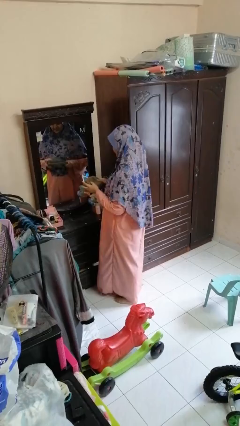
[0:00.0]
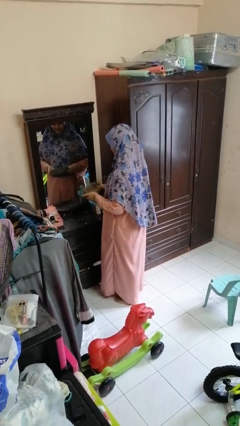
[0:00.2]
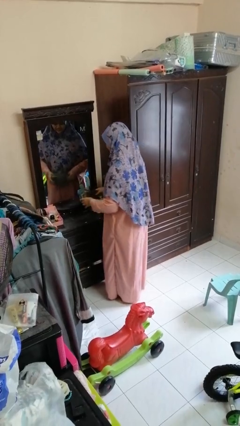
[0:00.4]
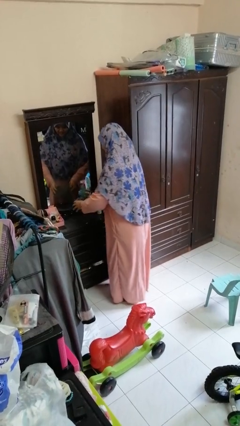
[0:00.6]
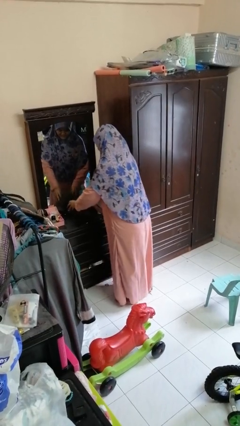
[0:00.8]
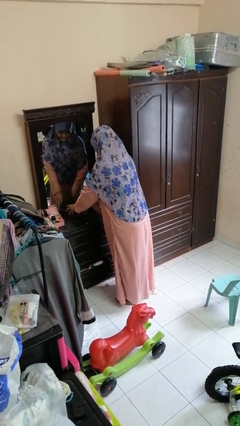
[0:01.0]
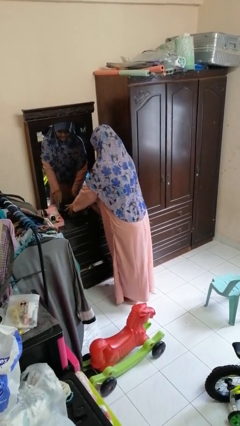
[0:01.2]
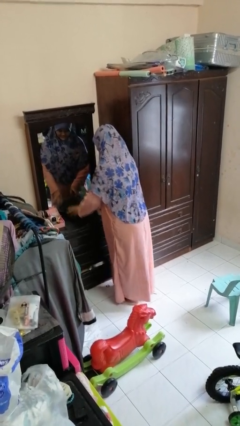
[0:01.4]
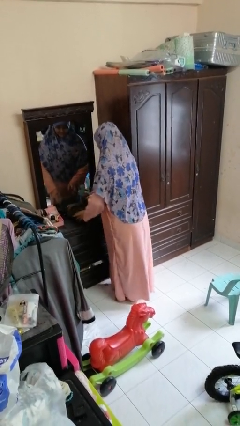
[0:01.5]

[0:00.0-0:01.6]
person puts down object on countertop

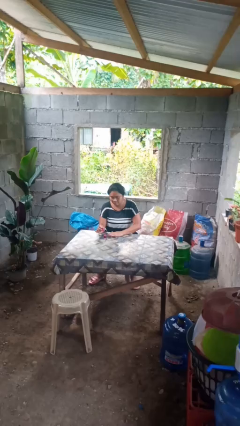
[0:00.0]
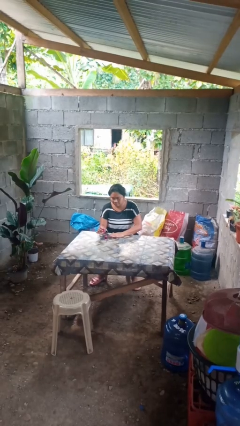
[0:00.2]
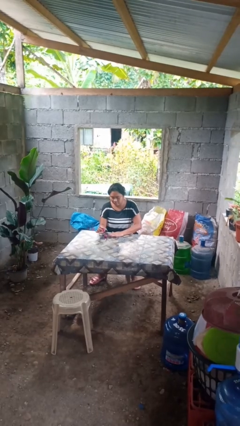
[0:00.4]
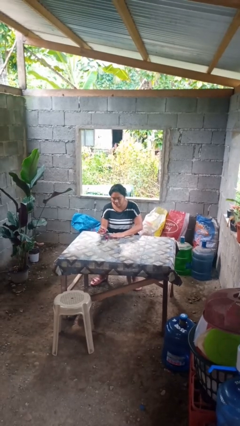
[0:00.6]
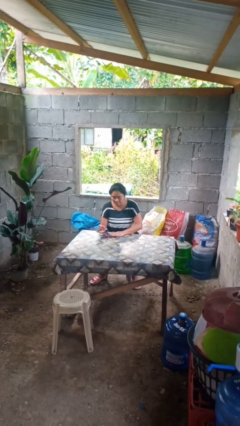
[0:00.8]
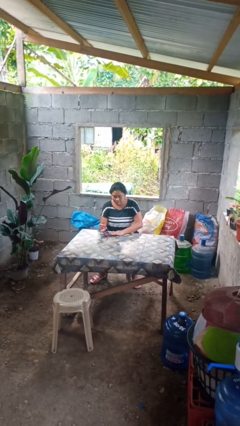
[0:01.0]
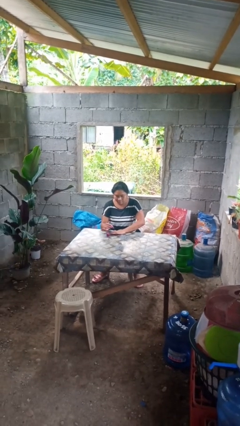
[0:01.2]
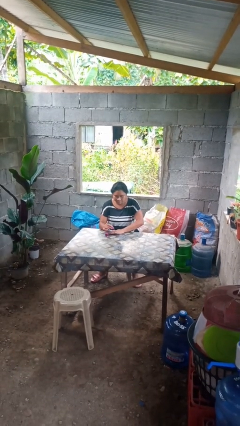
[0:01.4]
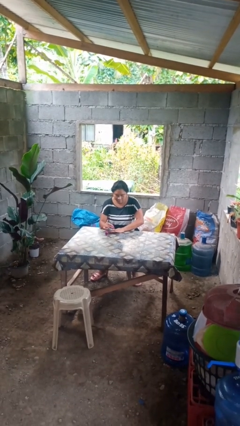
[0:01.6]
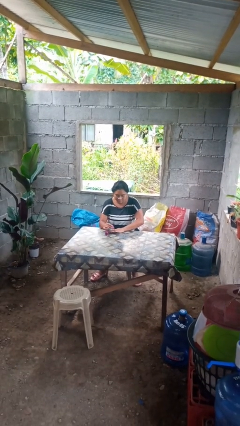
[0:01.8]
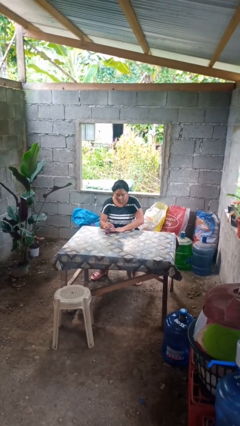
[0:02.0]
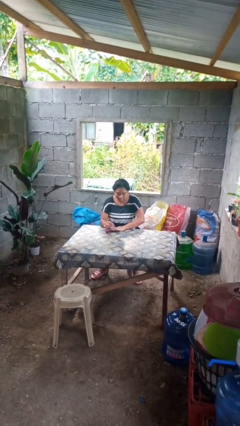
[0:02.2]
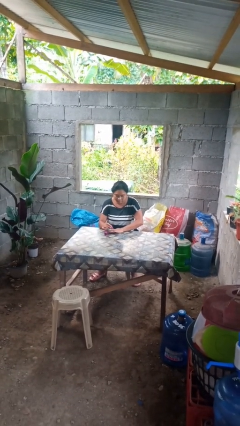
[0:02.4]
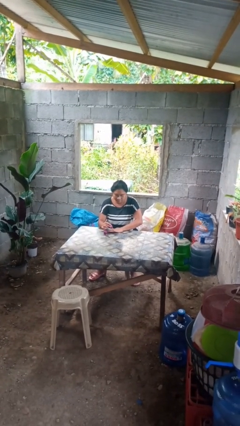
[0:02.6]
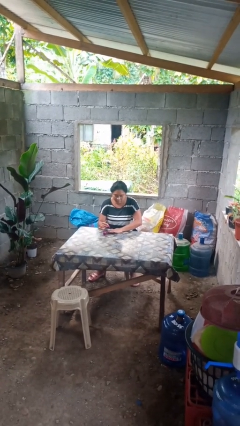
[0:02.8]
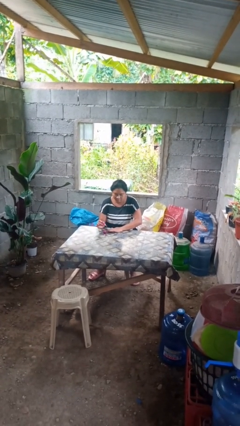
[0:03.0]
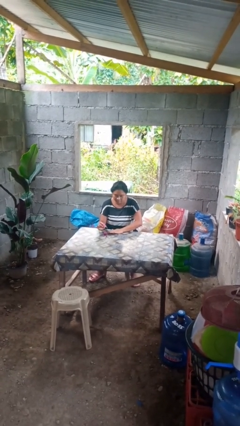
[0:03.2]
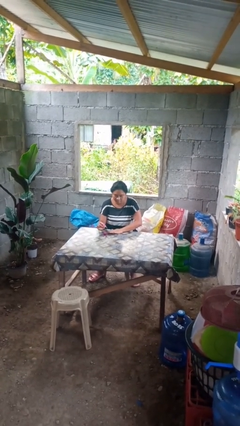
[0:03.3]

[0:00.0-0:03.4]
person paints fingernails

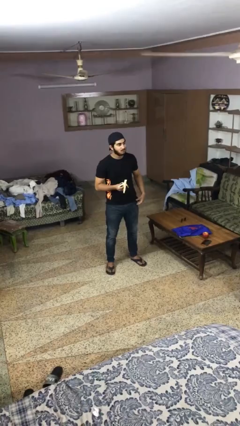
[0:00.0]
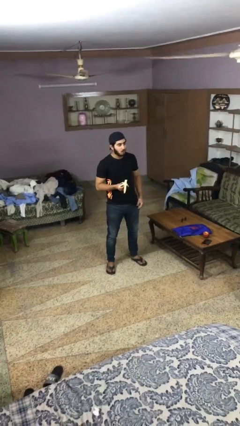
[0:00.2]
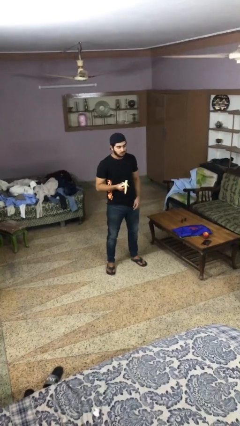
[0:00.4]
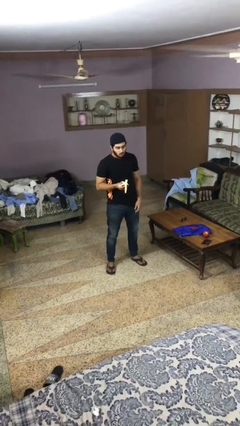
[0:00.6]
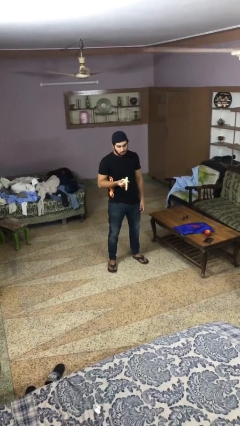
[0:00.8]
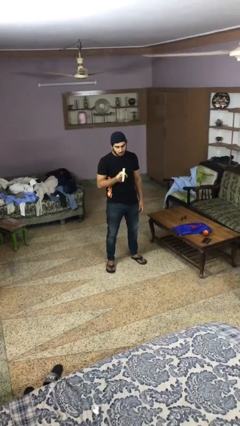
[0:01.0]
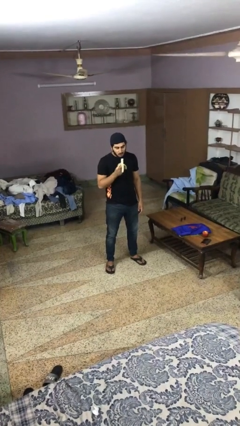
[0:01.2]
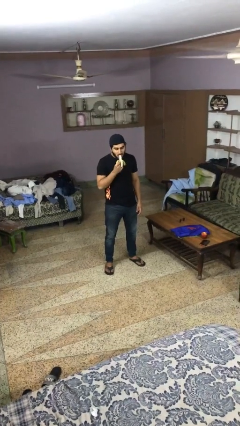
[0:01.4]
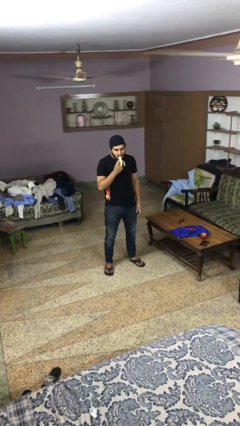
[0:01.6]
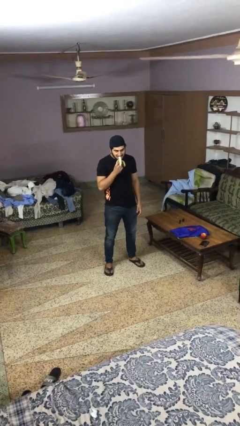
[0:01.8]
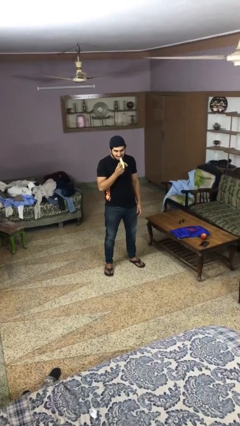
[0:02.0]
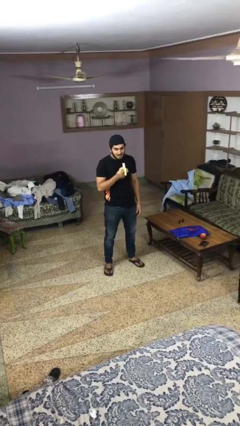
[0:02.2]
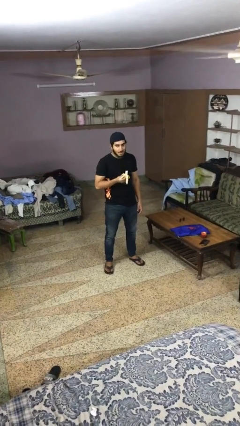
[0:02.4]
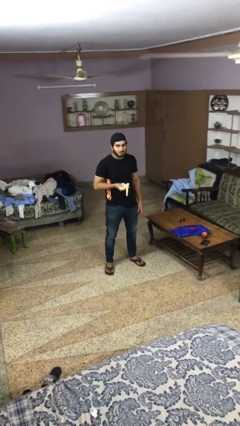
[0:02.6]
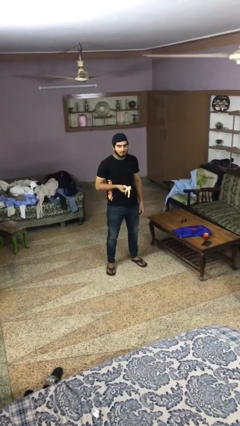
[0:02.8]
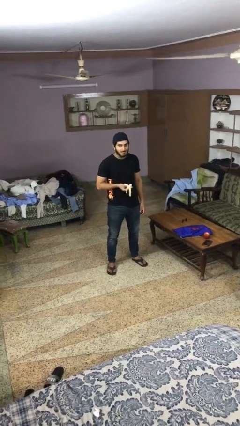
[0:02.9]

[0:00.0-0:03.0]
person eats banana

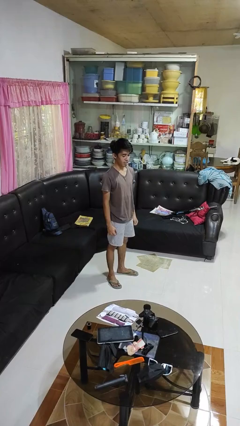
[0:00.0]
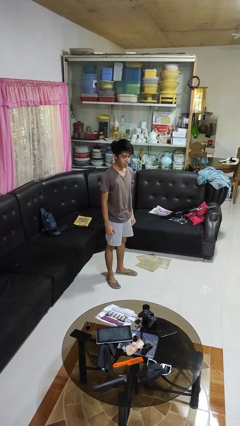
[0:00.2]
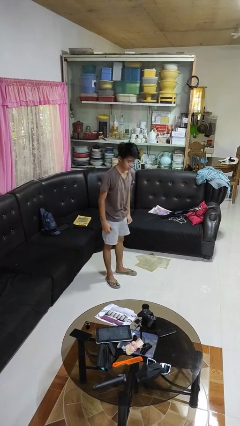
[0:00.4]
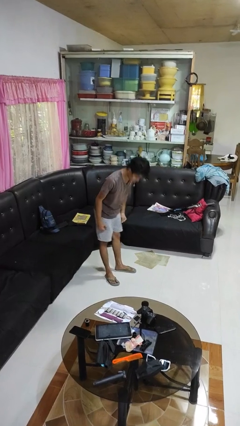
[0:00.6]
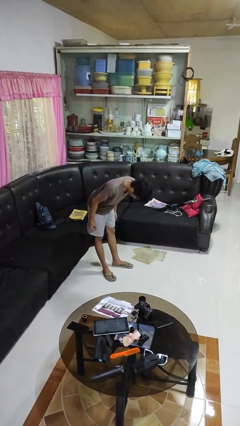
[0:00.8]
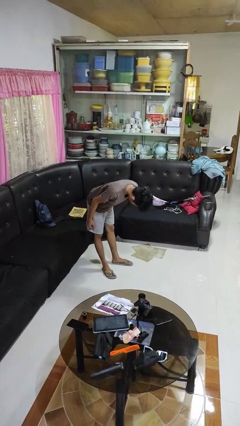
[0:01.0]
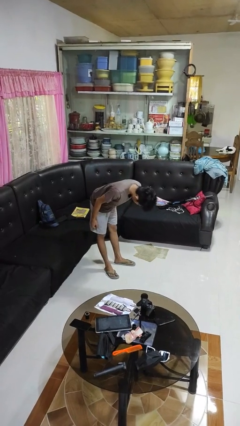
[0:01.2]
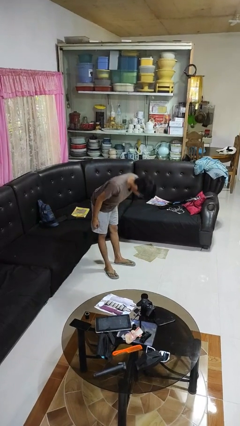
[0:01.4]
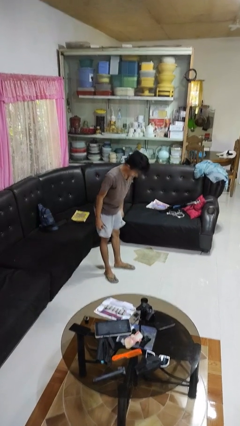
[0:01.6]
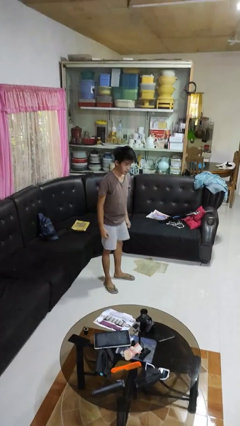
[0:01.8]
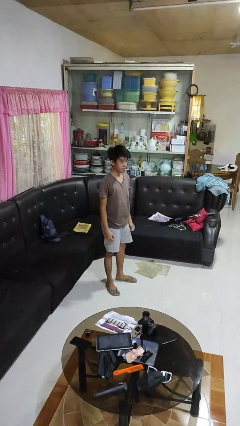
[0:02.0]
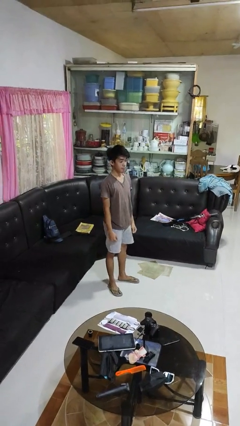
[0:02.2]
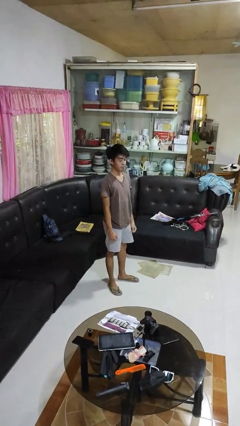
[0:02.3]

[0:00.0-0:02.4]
person bows

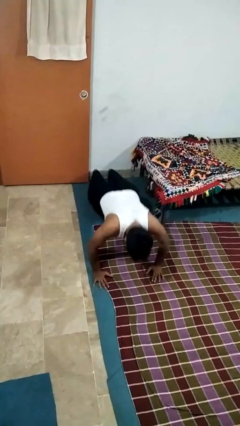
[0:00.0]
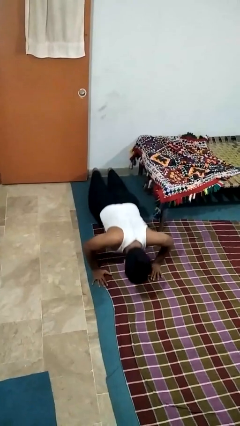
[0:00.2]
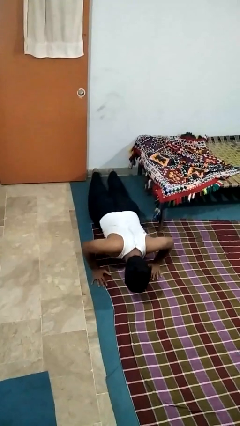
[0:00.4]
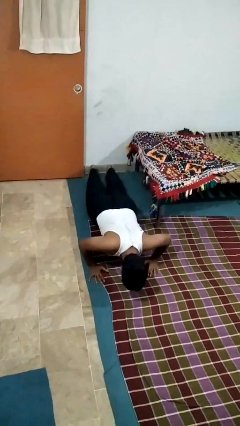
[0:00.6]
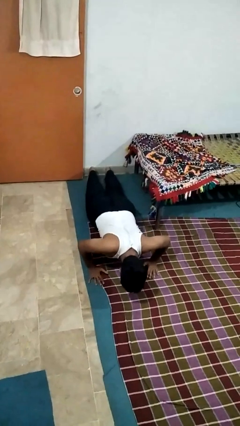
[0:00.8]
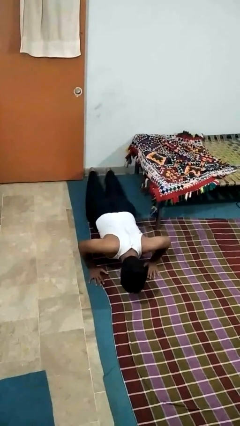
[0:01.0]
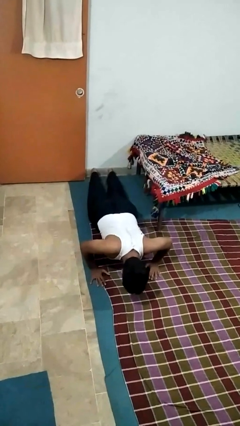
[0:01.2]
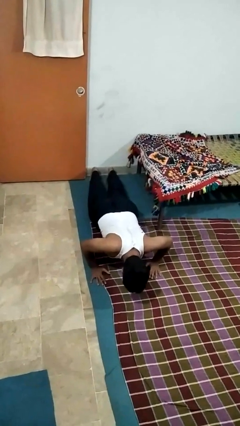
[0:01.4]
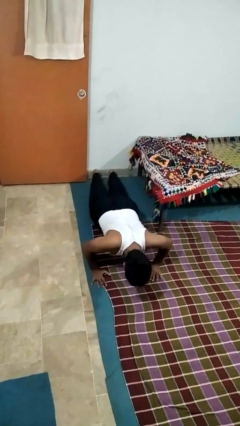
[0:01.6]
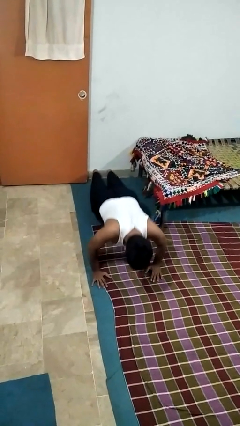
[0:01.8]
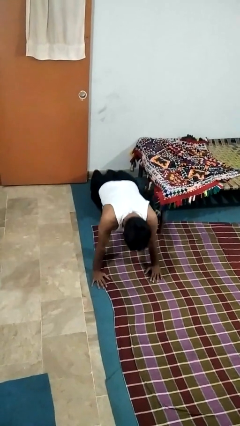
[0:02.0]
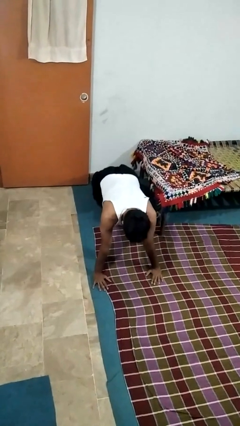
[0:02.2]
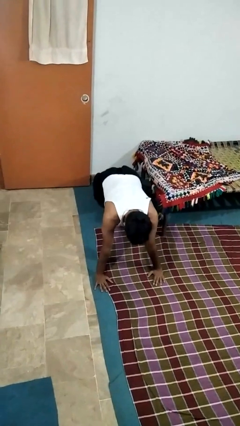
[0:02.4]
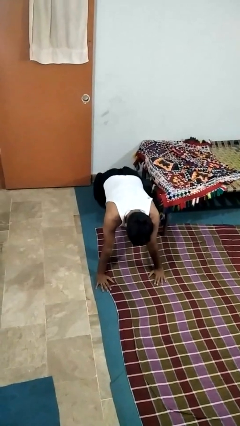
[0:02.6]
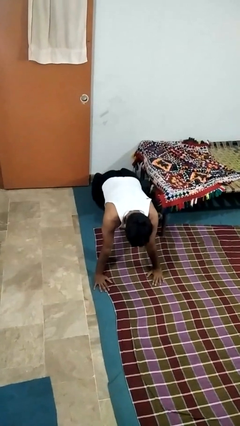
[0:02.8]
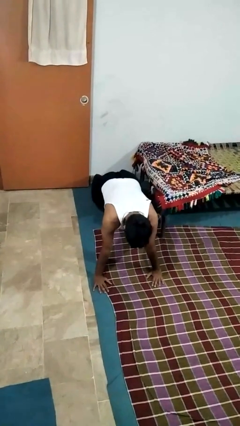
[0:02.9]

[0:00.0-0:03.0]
person exercises with pushup

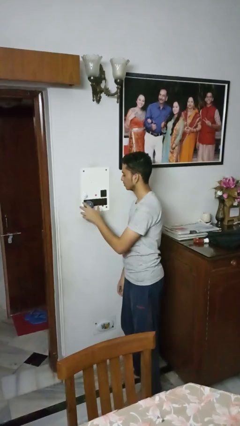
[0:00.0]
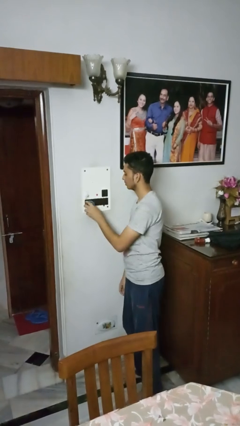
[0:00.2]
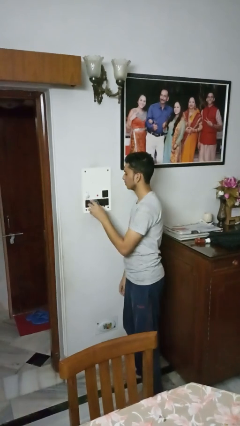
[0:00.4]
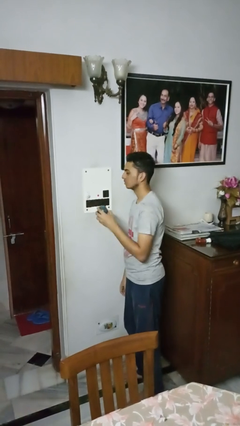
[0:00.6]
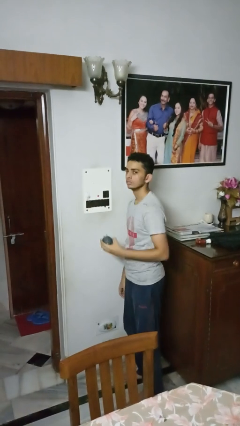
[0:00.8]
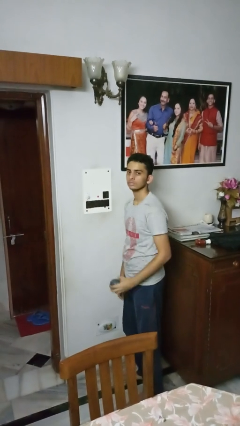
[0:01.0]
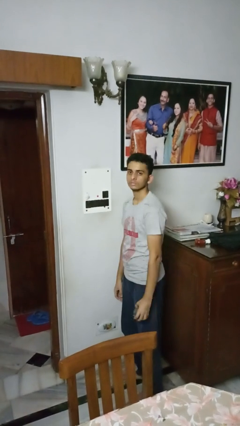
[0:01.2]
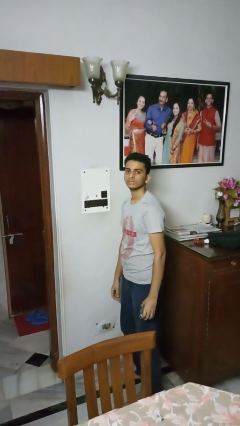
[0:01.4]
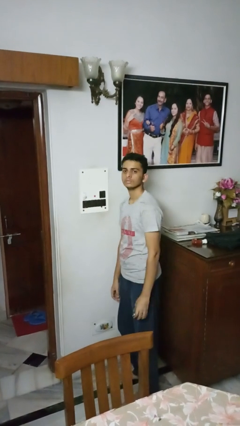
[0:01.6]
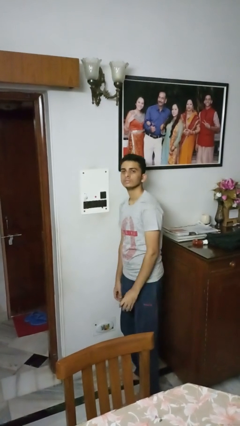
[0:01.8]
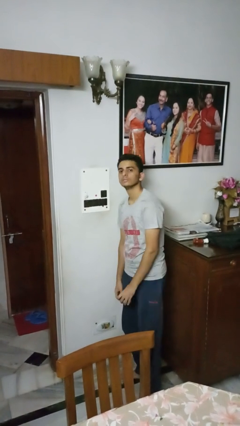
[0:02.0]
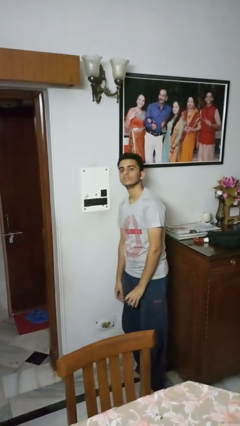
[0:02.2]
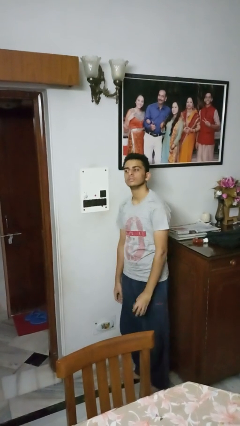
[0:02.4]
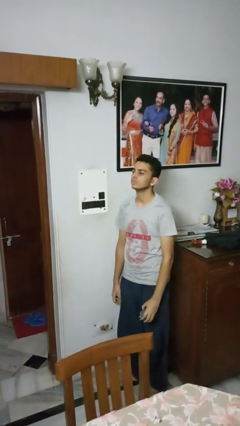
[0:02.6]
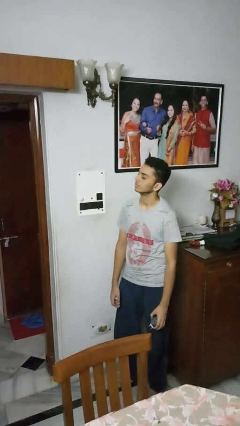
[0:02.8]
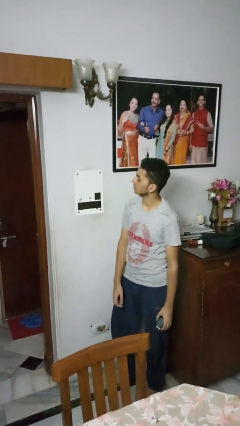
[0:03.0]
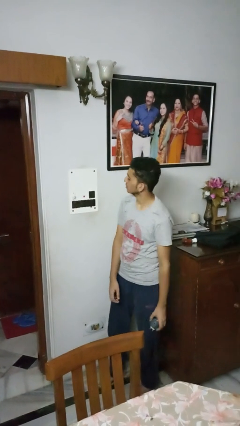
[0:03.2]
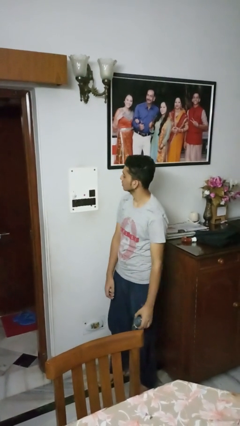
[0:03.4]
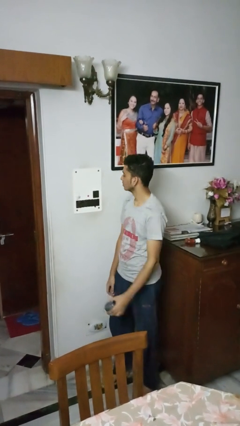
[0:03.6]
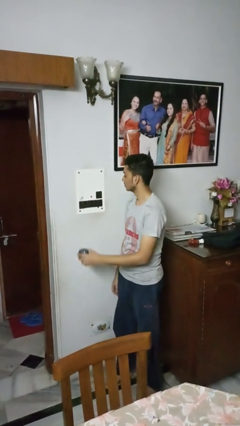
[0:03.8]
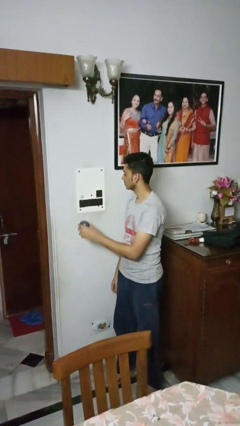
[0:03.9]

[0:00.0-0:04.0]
person unplugs from electrical socket

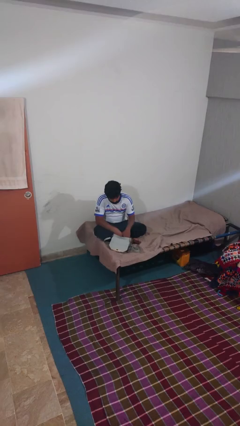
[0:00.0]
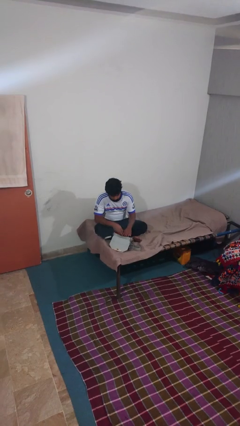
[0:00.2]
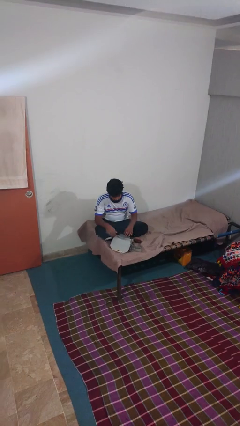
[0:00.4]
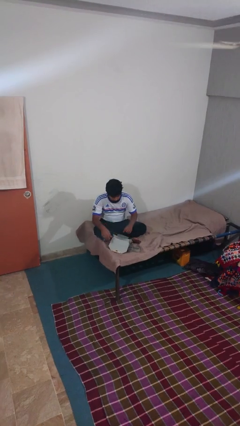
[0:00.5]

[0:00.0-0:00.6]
person puts object into purse
